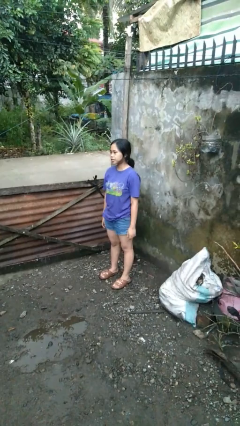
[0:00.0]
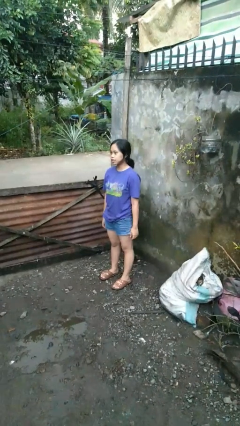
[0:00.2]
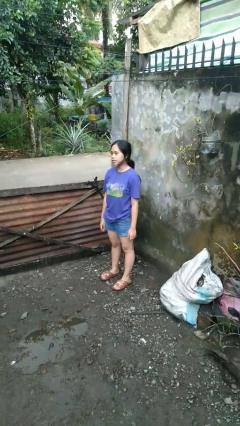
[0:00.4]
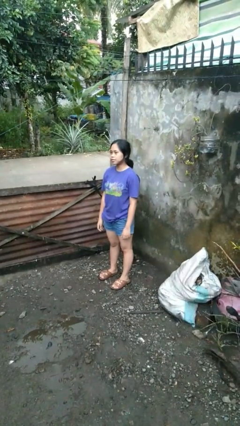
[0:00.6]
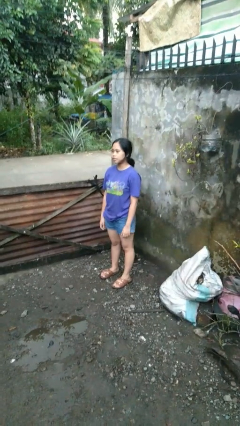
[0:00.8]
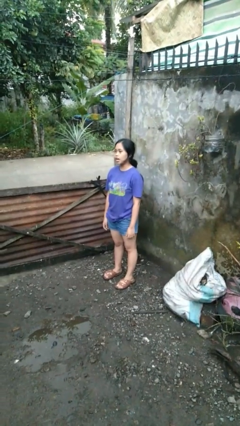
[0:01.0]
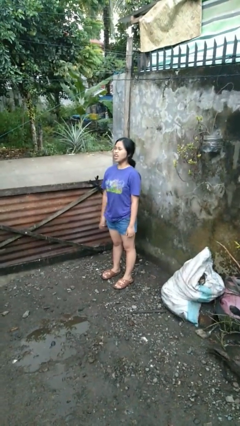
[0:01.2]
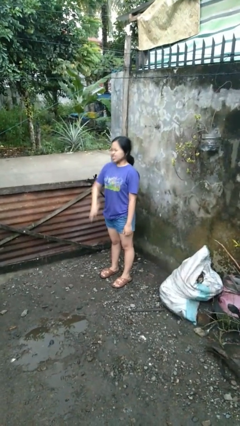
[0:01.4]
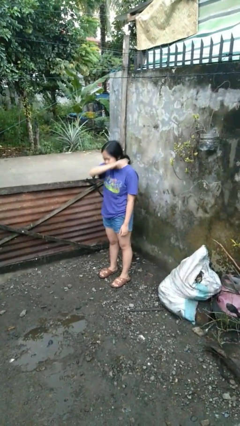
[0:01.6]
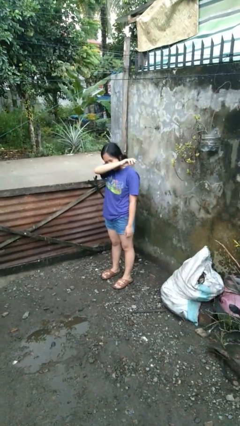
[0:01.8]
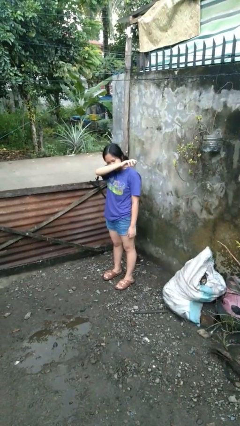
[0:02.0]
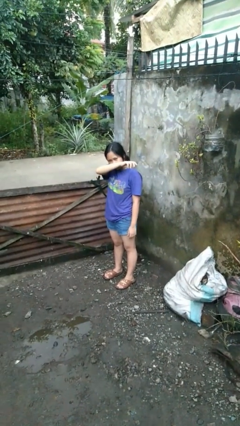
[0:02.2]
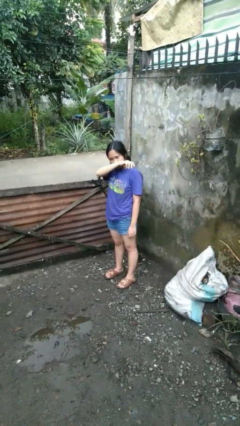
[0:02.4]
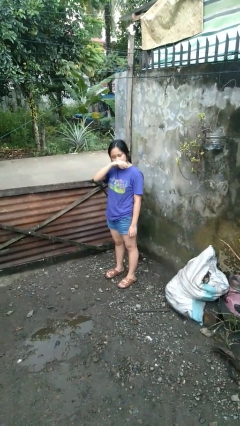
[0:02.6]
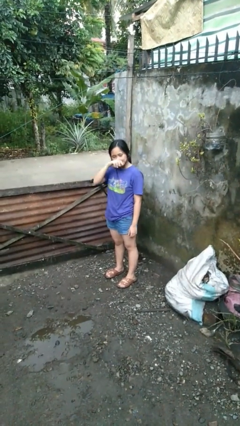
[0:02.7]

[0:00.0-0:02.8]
person sneezes into arm

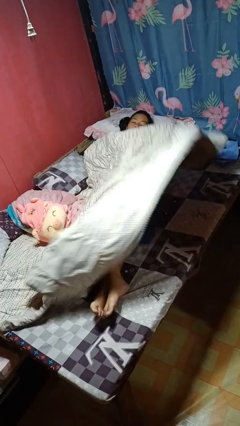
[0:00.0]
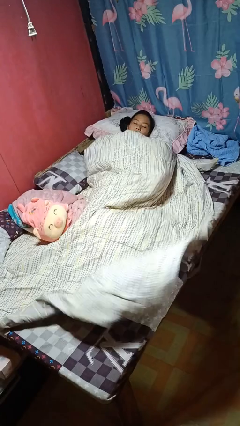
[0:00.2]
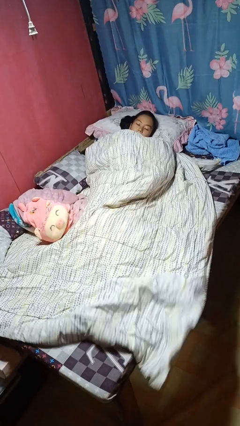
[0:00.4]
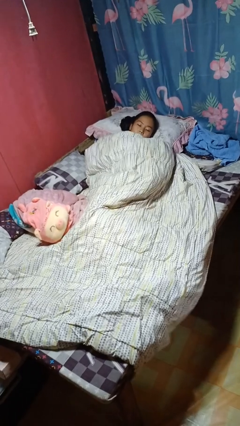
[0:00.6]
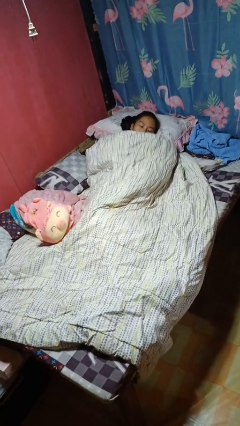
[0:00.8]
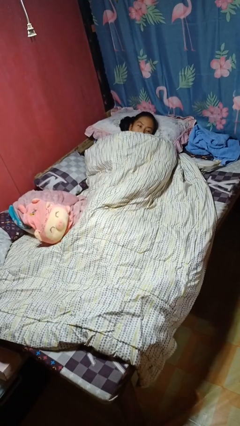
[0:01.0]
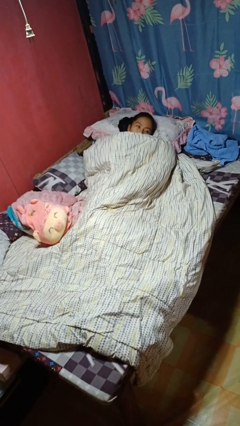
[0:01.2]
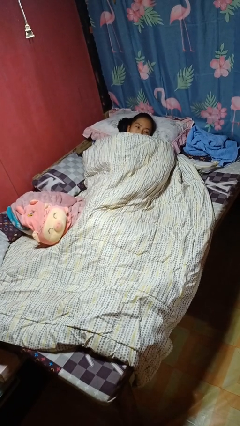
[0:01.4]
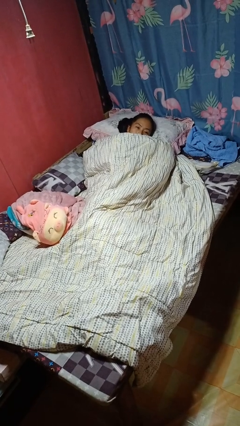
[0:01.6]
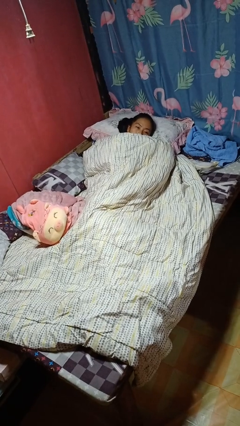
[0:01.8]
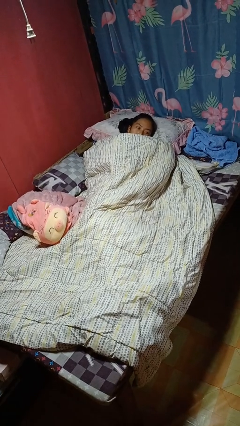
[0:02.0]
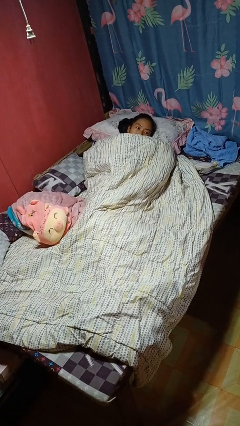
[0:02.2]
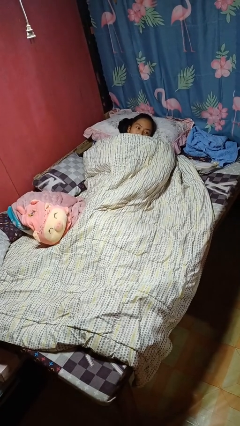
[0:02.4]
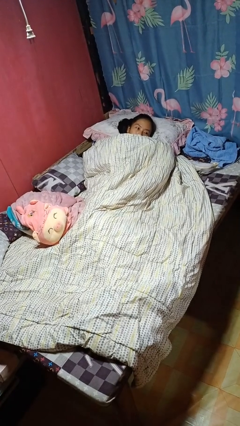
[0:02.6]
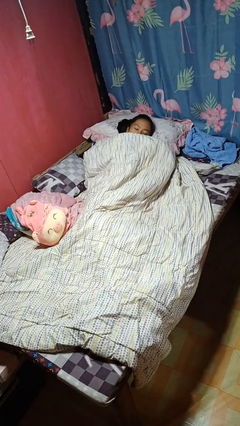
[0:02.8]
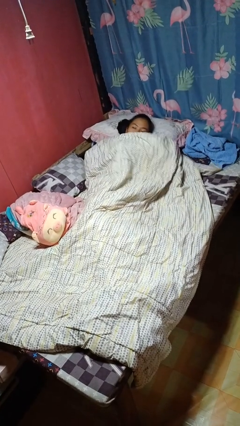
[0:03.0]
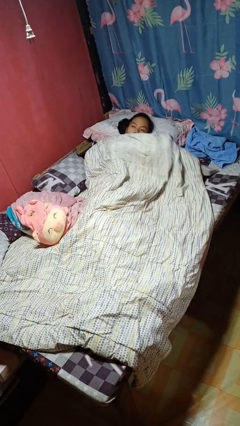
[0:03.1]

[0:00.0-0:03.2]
person covers with bedsheets

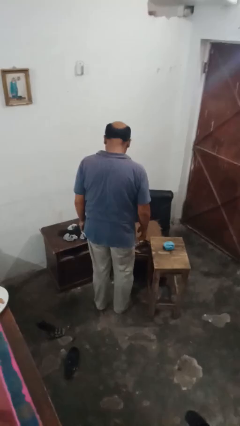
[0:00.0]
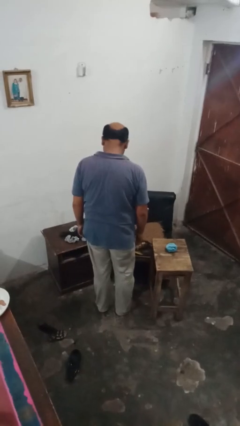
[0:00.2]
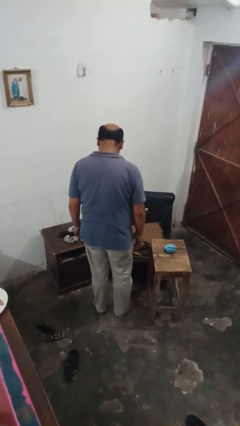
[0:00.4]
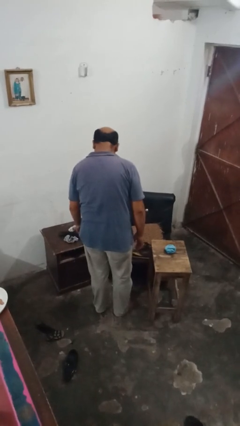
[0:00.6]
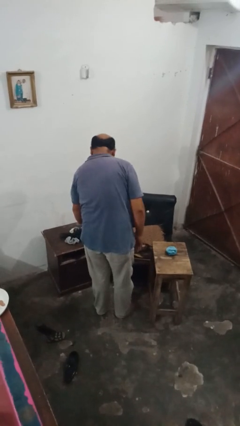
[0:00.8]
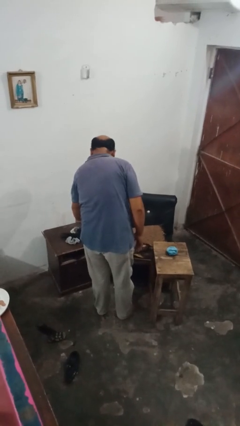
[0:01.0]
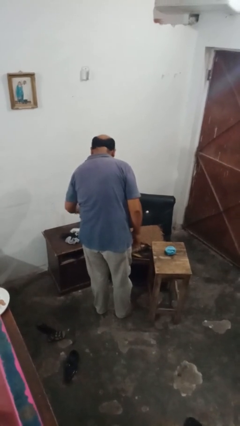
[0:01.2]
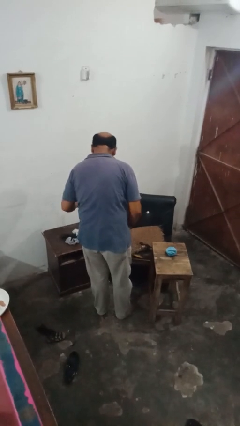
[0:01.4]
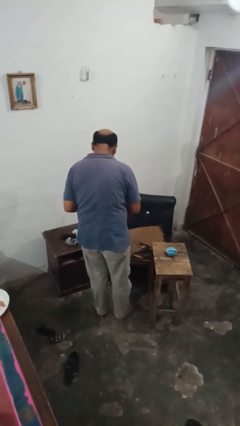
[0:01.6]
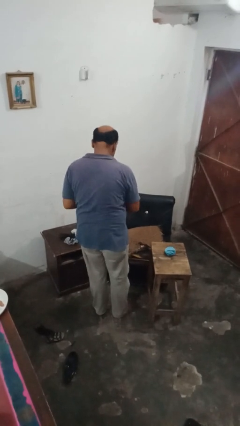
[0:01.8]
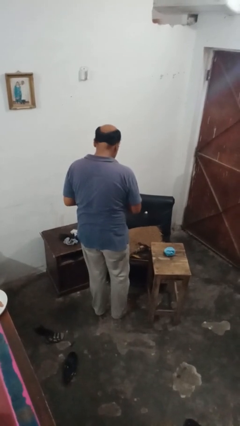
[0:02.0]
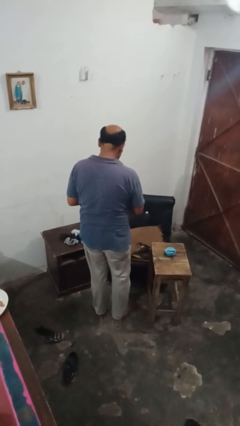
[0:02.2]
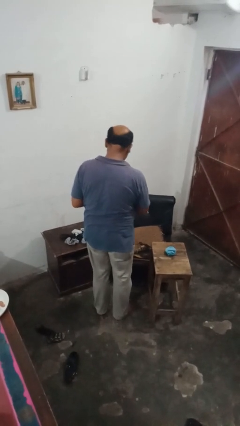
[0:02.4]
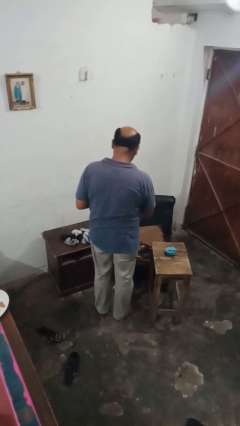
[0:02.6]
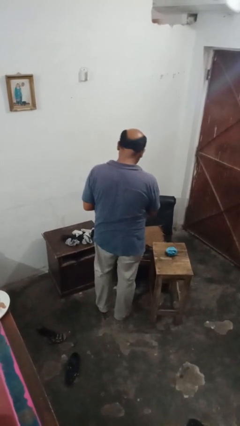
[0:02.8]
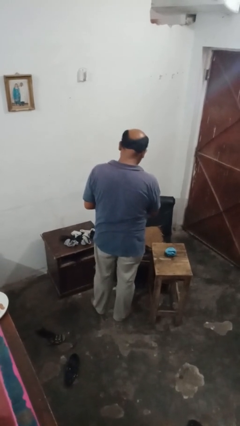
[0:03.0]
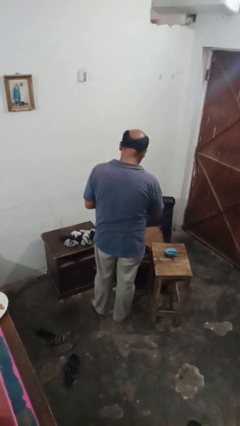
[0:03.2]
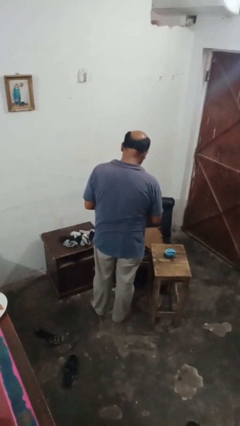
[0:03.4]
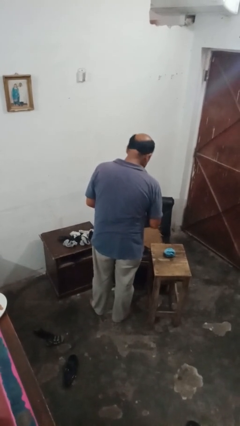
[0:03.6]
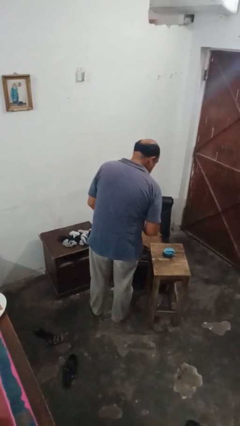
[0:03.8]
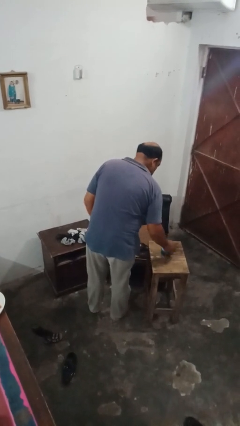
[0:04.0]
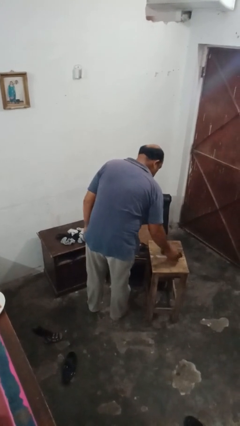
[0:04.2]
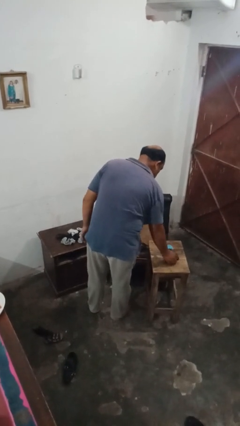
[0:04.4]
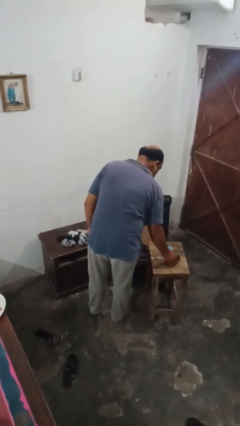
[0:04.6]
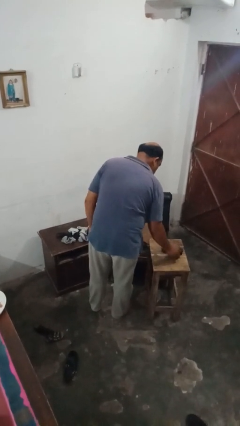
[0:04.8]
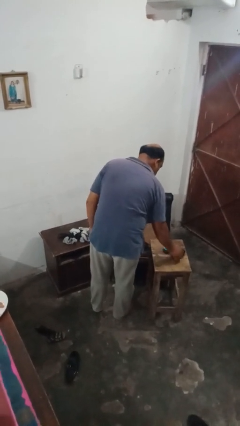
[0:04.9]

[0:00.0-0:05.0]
person folds socks

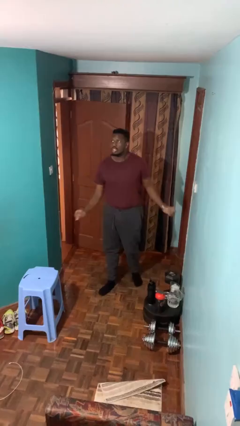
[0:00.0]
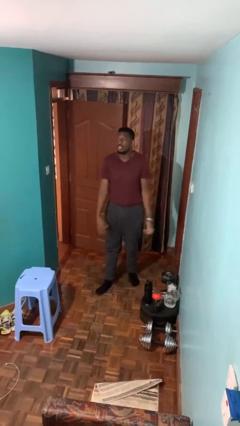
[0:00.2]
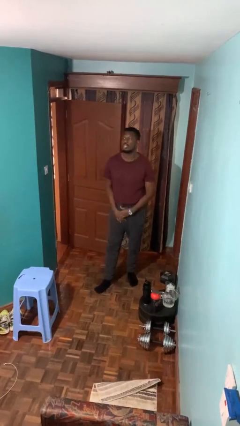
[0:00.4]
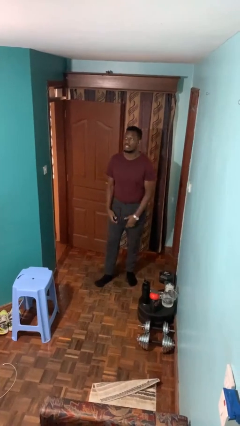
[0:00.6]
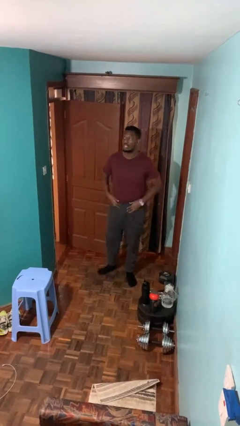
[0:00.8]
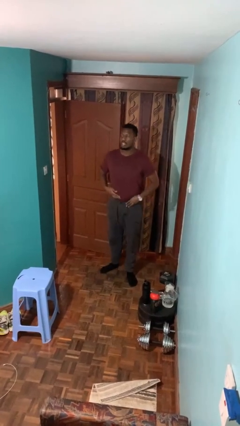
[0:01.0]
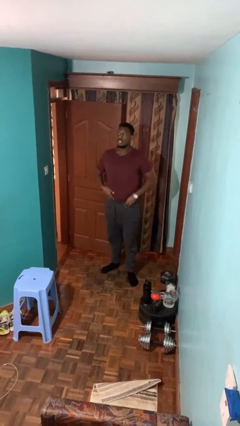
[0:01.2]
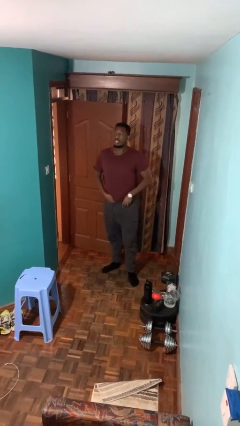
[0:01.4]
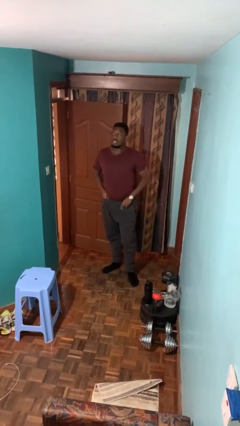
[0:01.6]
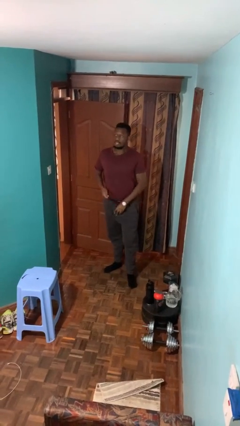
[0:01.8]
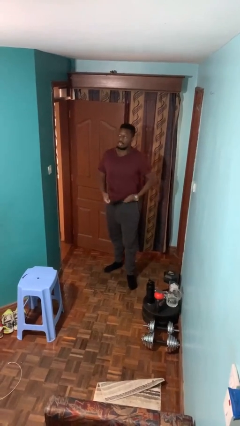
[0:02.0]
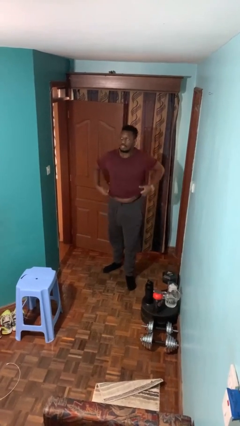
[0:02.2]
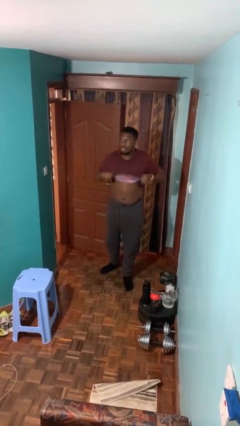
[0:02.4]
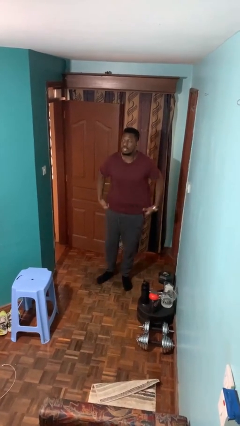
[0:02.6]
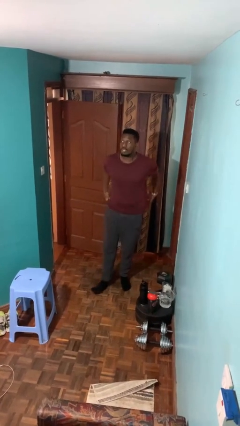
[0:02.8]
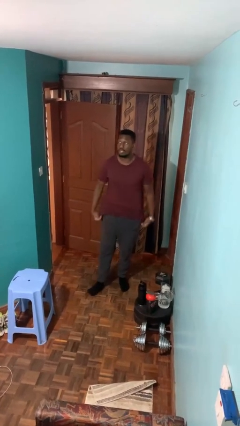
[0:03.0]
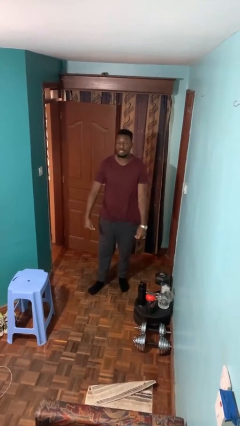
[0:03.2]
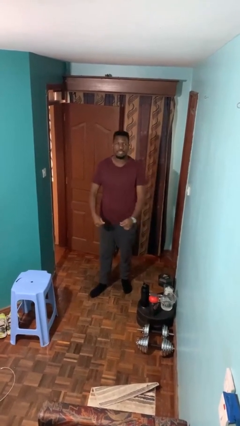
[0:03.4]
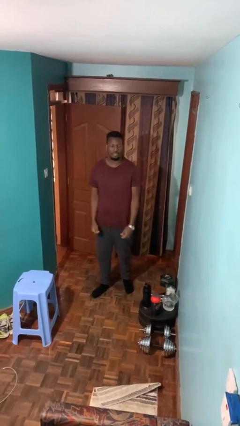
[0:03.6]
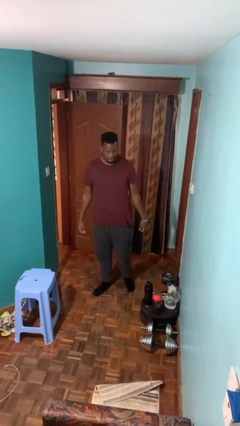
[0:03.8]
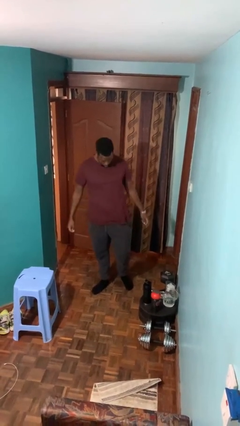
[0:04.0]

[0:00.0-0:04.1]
person untucks shirt

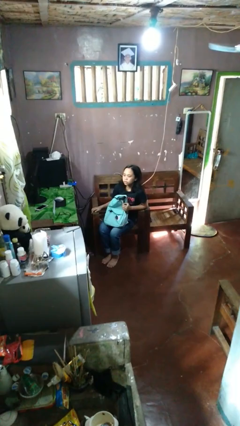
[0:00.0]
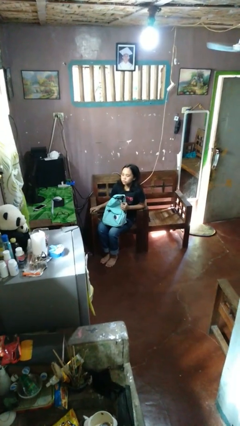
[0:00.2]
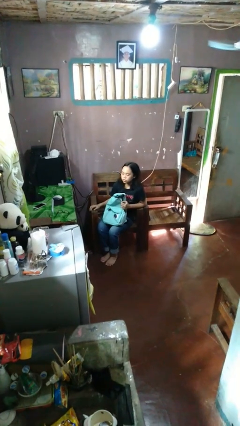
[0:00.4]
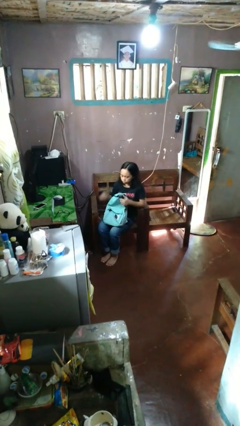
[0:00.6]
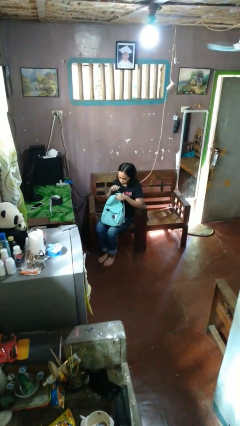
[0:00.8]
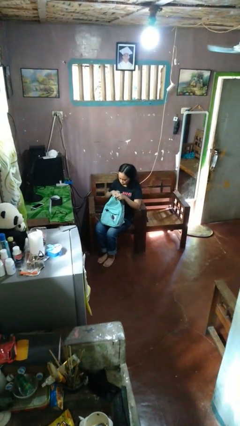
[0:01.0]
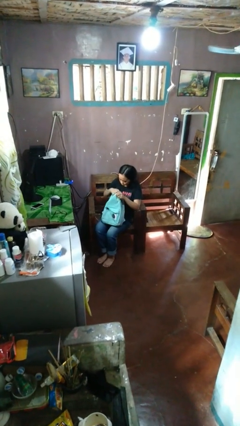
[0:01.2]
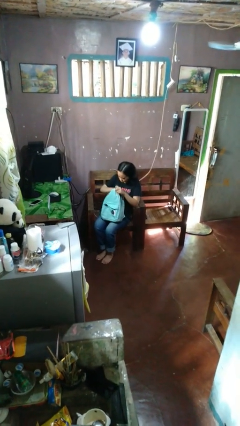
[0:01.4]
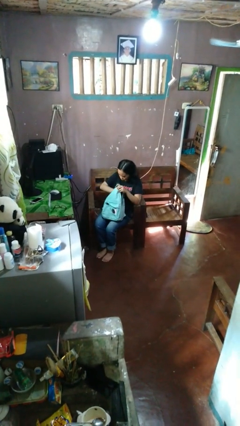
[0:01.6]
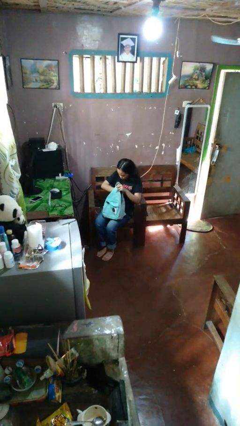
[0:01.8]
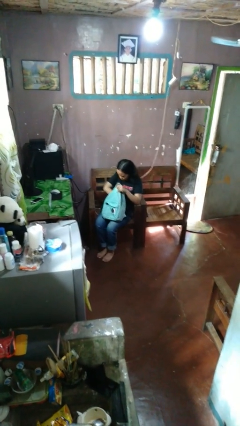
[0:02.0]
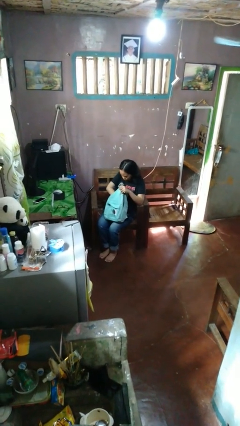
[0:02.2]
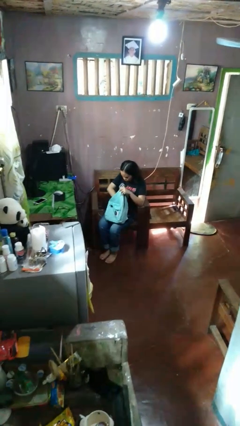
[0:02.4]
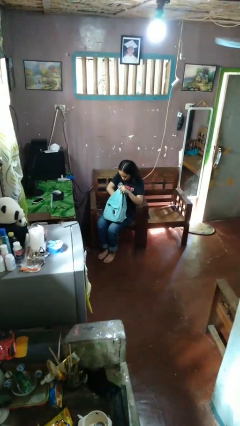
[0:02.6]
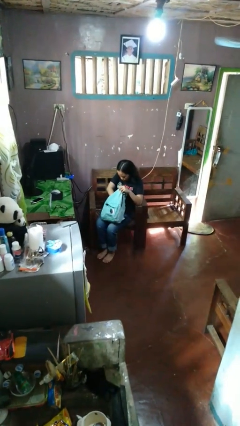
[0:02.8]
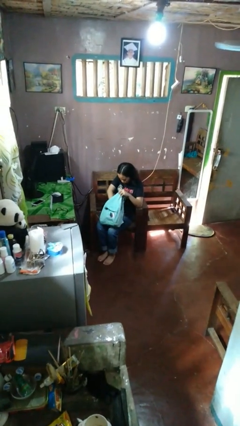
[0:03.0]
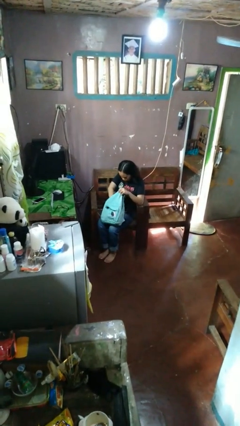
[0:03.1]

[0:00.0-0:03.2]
person searches in backpack
